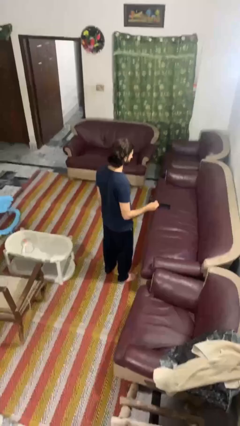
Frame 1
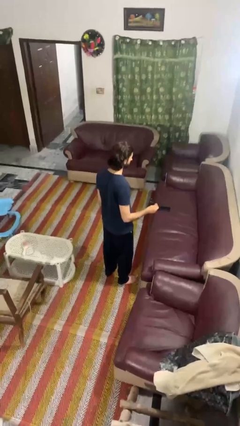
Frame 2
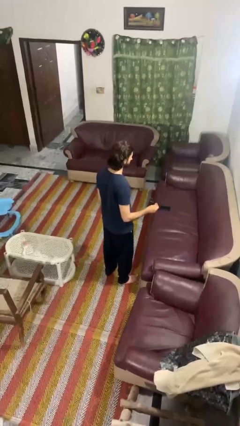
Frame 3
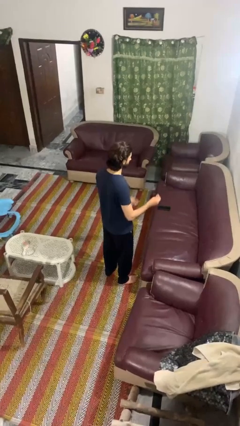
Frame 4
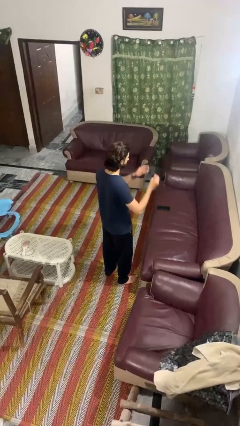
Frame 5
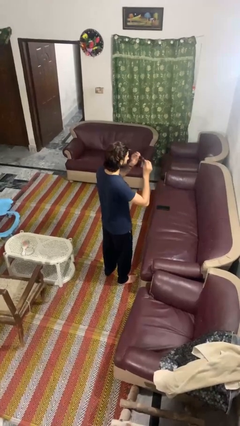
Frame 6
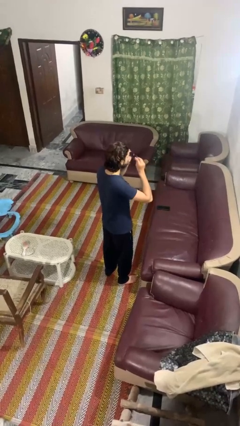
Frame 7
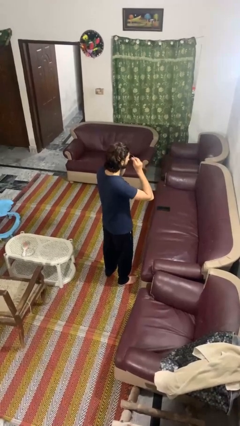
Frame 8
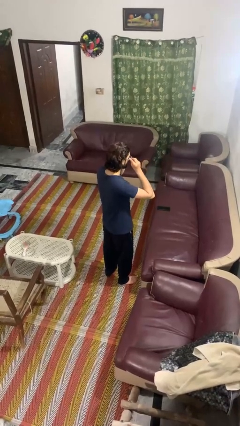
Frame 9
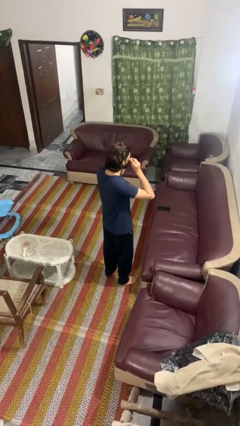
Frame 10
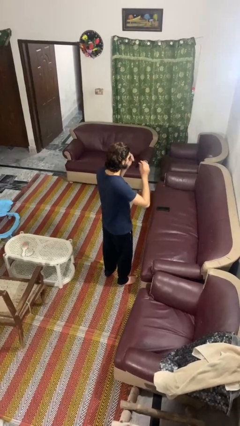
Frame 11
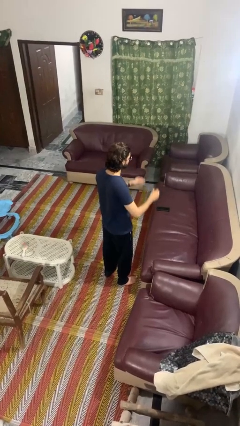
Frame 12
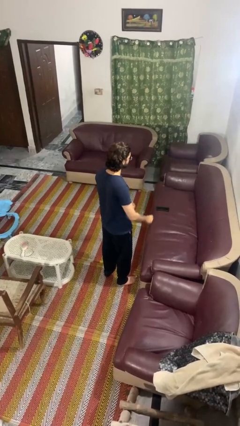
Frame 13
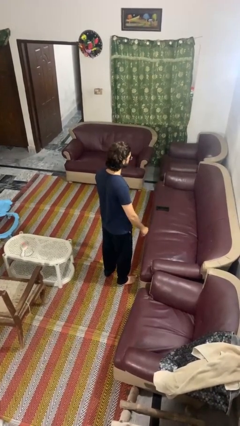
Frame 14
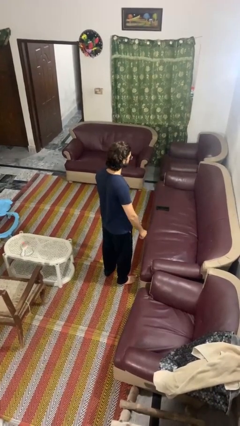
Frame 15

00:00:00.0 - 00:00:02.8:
person puts on sunglasses

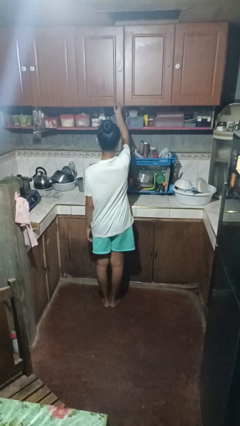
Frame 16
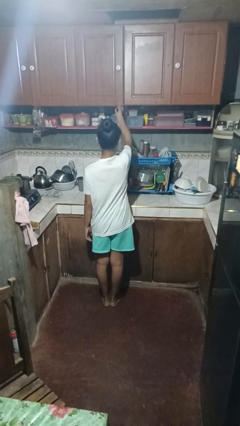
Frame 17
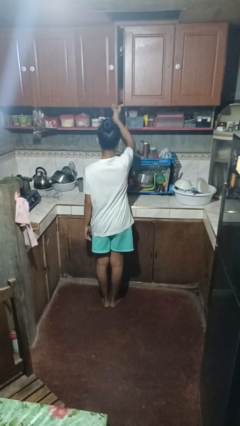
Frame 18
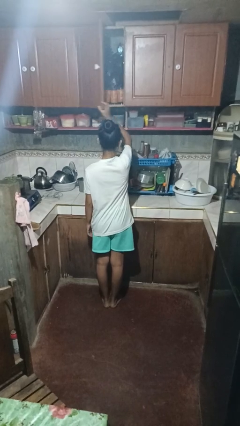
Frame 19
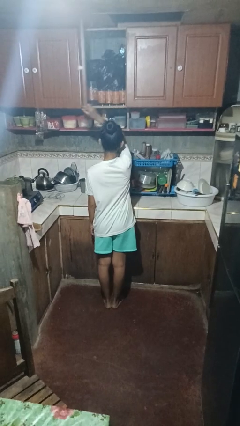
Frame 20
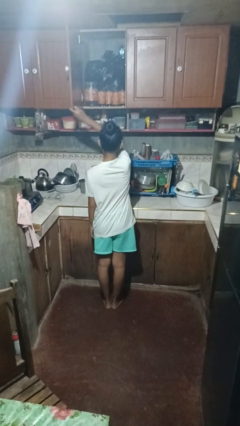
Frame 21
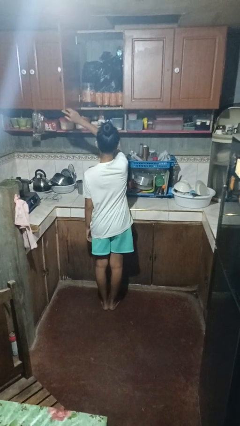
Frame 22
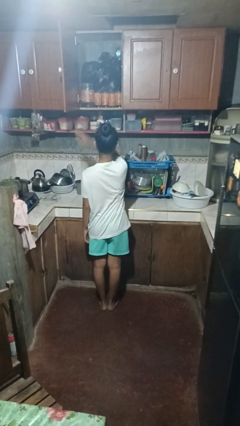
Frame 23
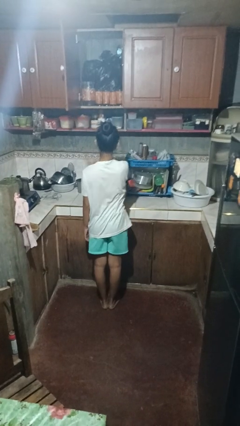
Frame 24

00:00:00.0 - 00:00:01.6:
person opens cabinet

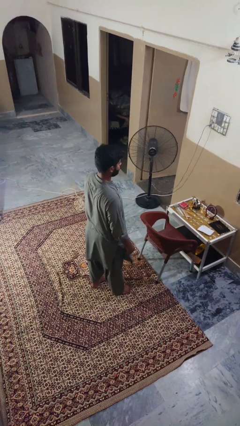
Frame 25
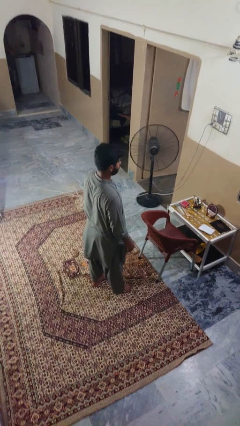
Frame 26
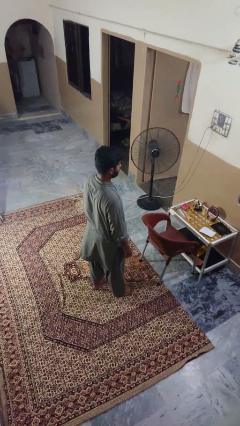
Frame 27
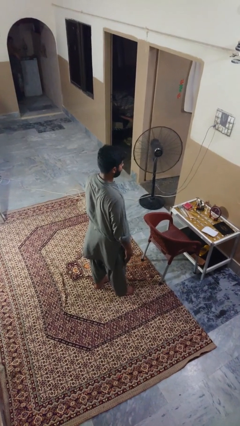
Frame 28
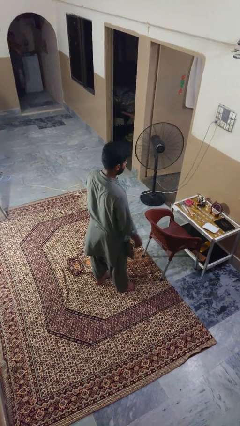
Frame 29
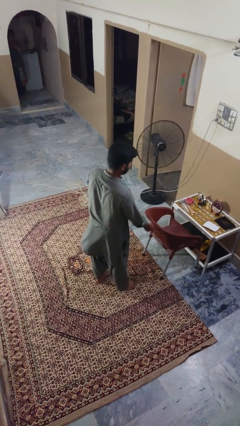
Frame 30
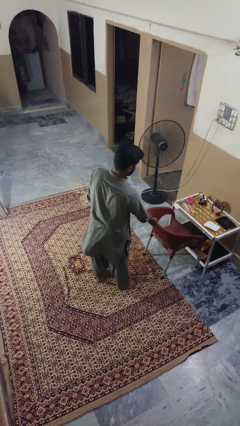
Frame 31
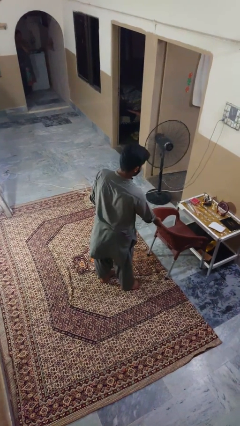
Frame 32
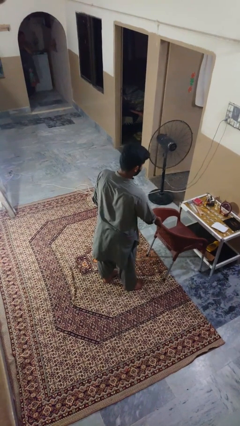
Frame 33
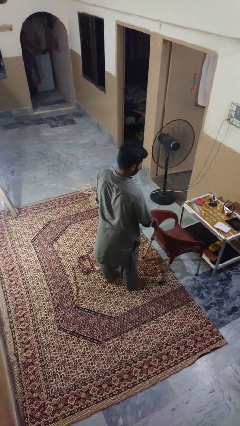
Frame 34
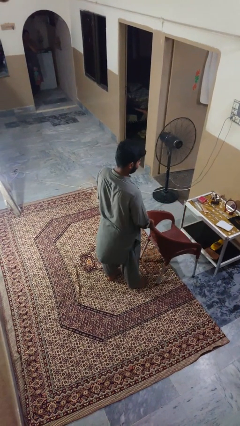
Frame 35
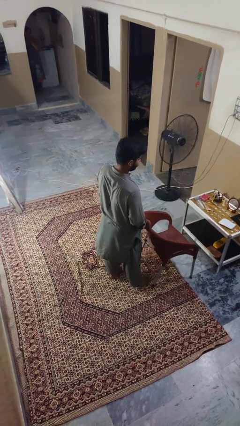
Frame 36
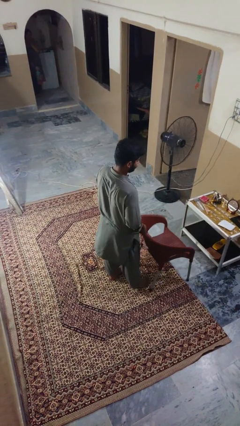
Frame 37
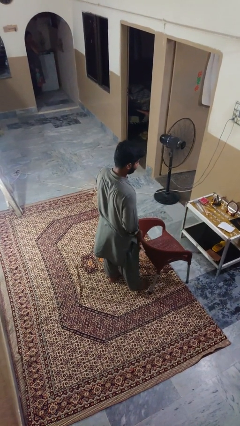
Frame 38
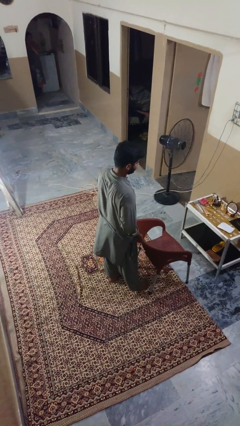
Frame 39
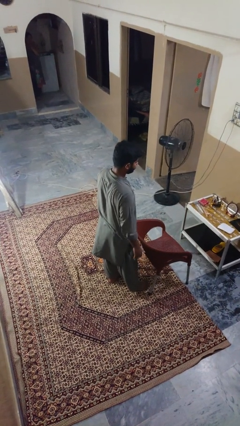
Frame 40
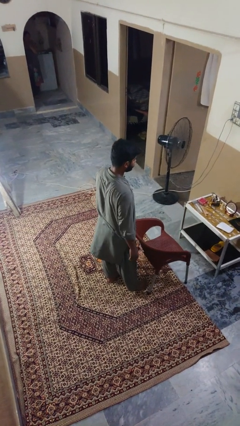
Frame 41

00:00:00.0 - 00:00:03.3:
person pulls out chair

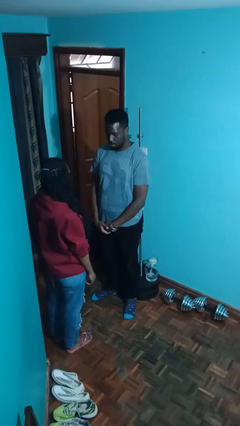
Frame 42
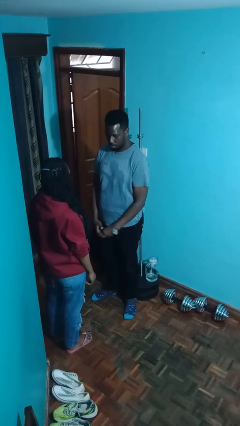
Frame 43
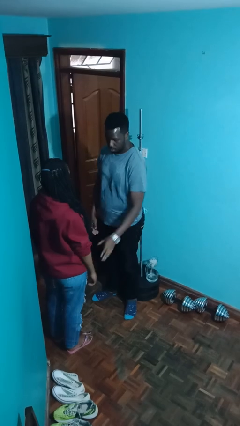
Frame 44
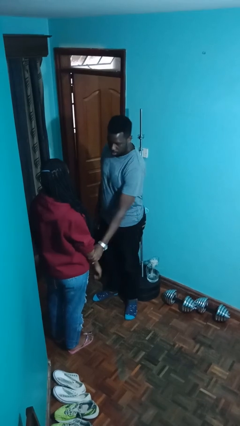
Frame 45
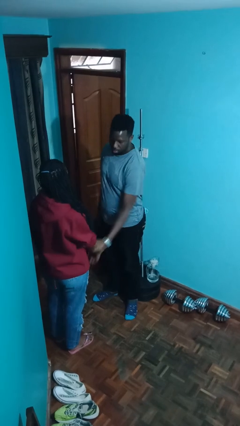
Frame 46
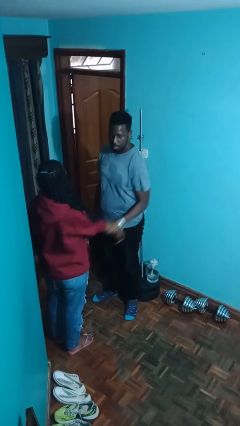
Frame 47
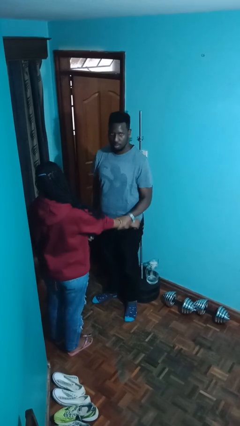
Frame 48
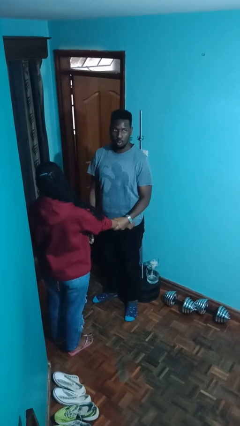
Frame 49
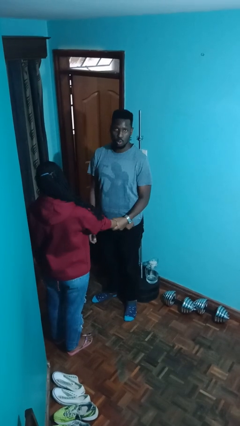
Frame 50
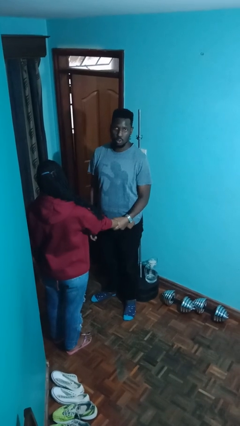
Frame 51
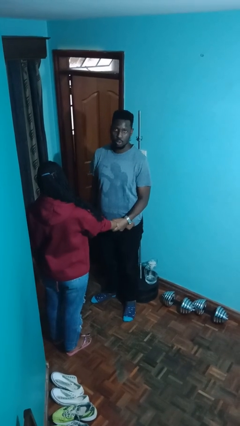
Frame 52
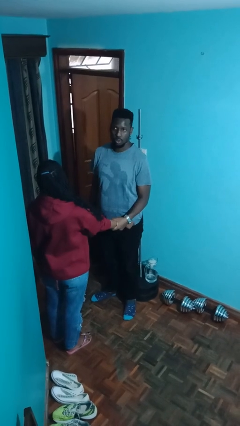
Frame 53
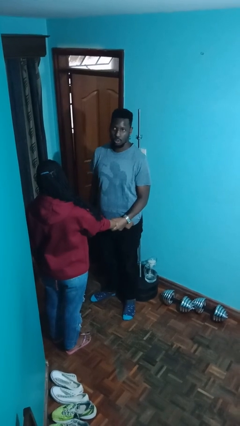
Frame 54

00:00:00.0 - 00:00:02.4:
person grabs person by forearm

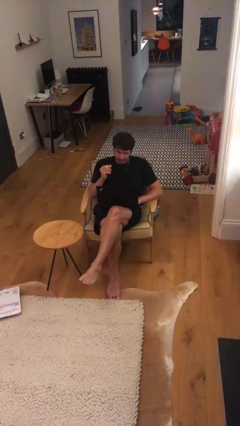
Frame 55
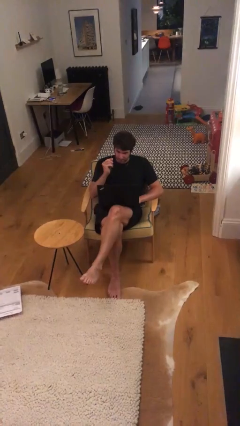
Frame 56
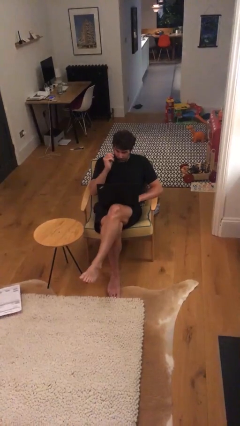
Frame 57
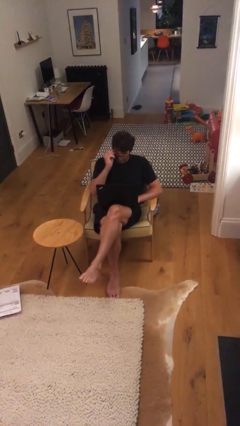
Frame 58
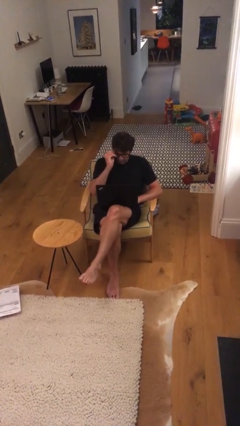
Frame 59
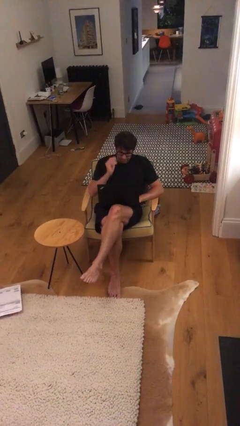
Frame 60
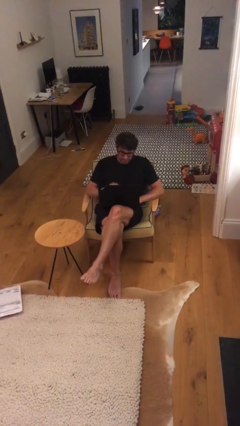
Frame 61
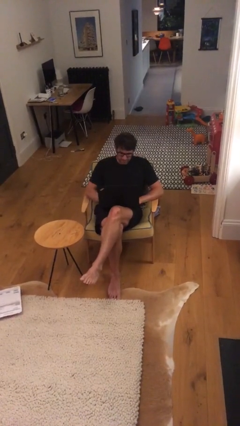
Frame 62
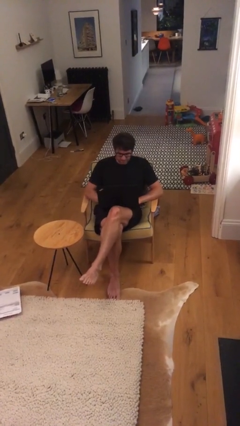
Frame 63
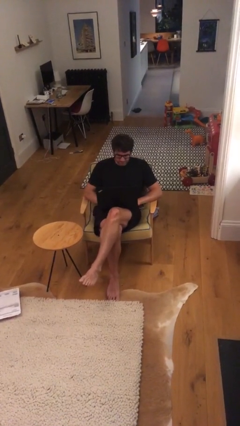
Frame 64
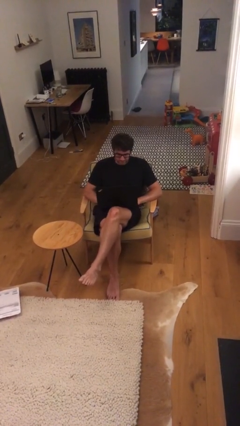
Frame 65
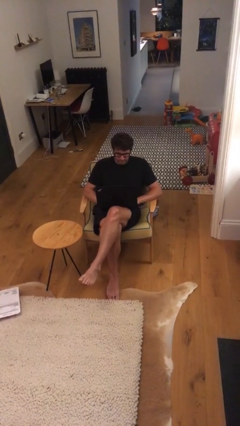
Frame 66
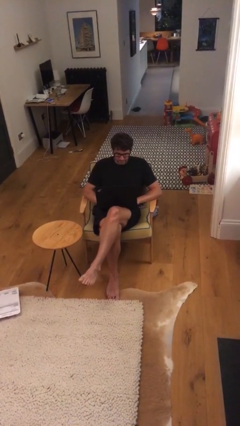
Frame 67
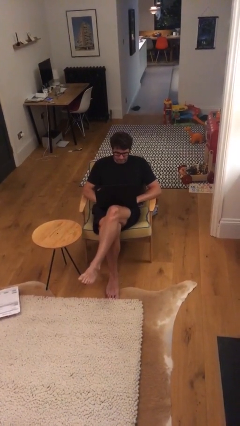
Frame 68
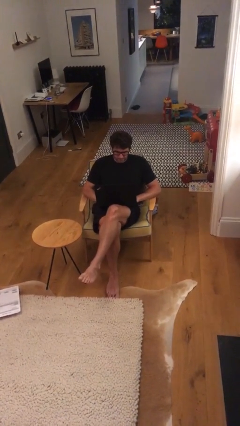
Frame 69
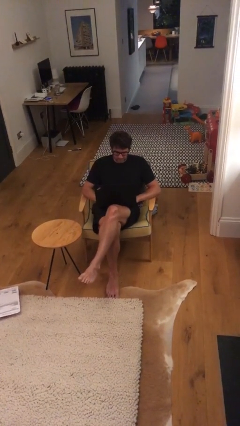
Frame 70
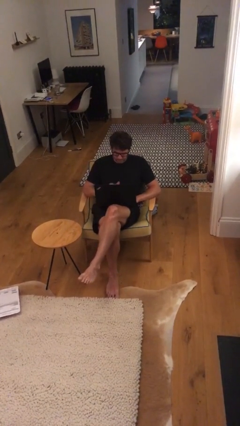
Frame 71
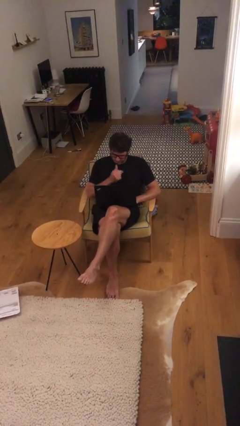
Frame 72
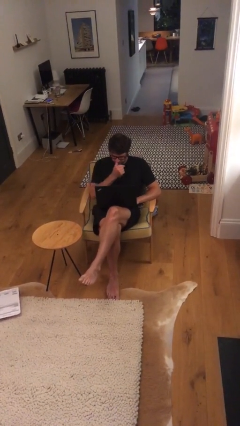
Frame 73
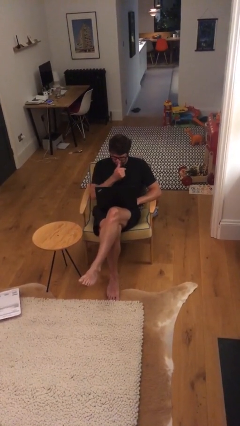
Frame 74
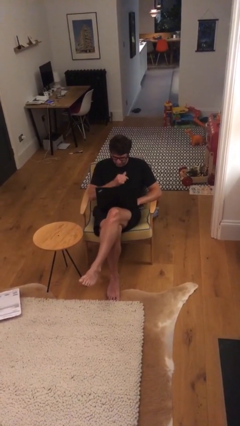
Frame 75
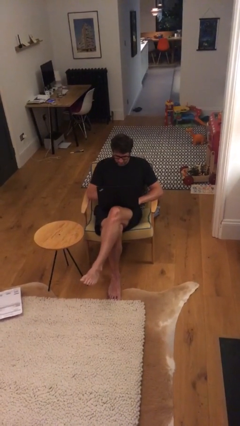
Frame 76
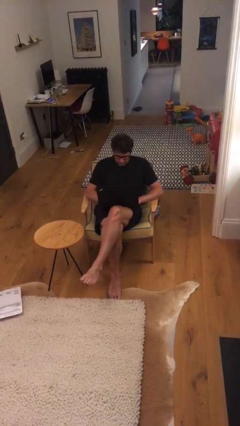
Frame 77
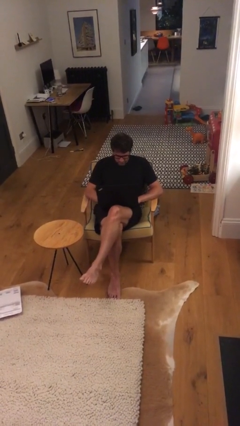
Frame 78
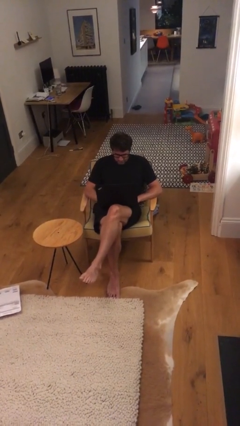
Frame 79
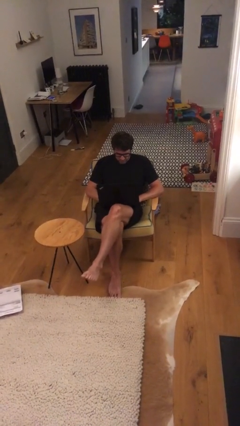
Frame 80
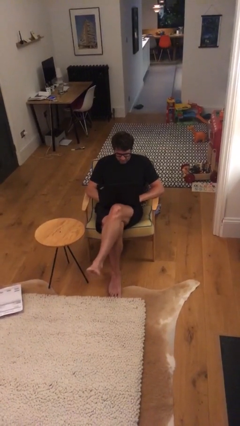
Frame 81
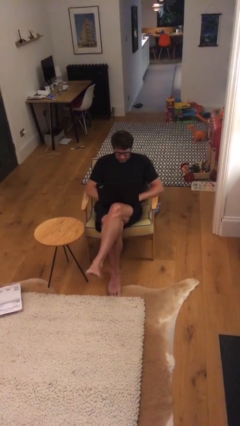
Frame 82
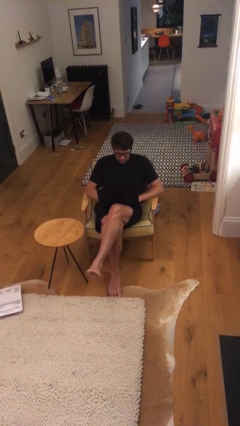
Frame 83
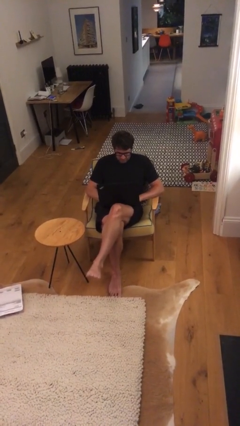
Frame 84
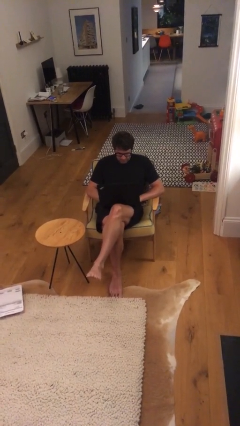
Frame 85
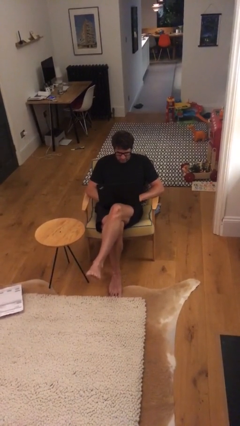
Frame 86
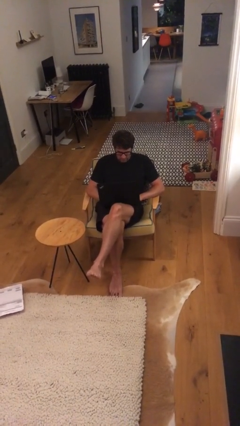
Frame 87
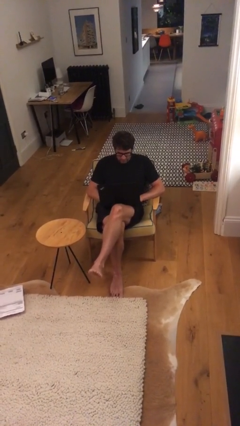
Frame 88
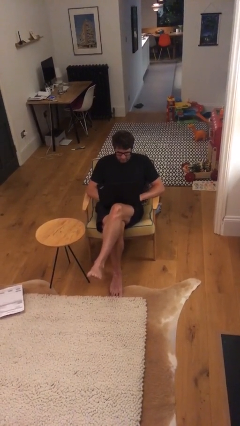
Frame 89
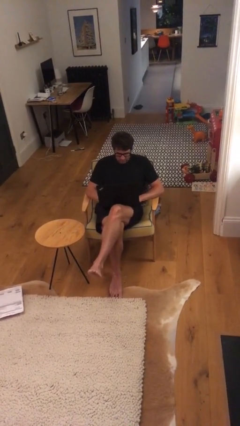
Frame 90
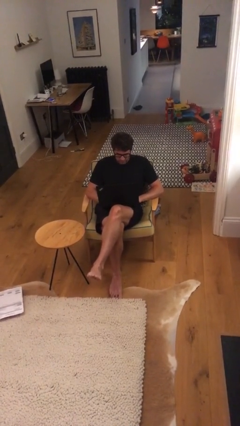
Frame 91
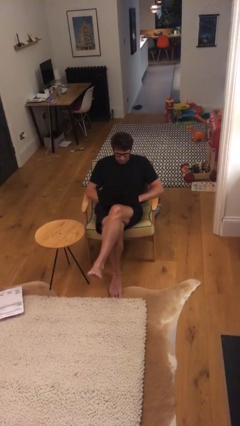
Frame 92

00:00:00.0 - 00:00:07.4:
person interacts with laptop

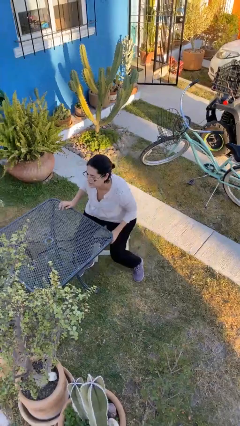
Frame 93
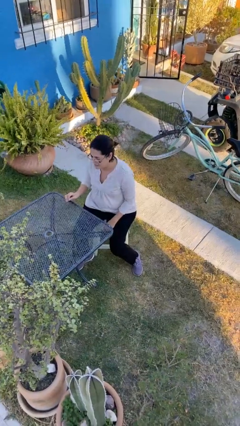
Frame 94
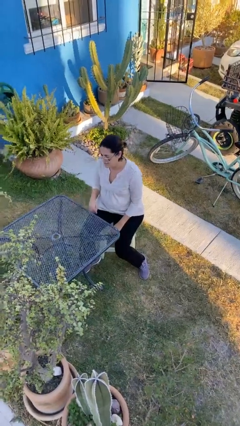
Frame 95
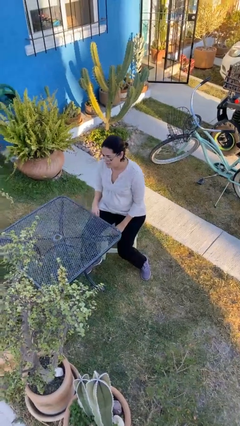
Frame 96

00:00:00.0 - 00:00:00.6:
person sits down
